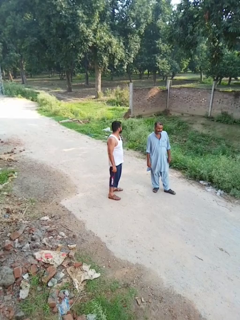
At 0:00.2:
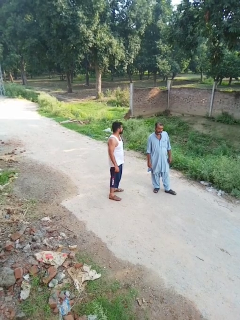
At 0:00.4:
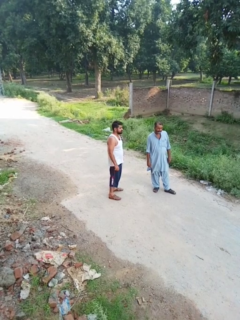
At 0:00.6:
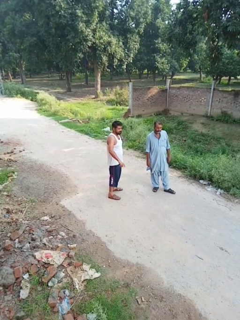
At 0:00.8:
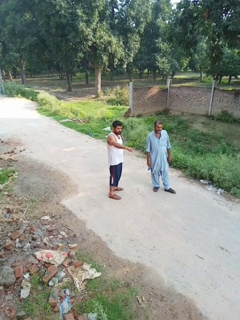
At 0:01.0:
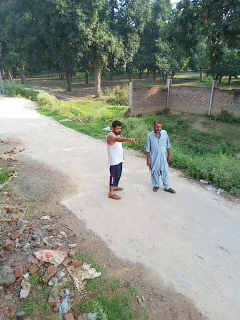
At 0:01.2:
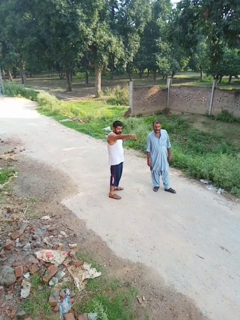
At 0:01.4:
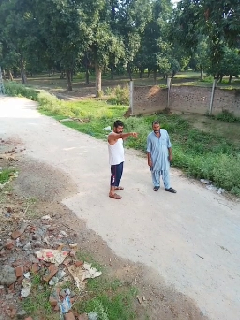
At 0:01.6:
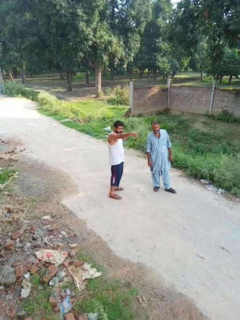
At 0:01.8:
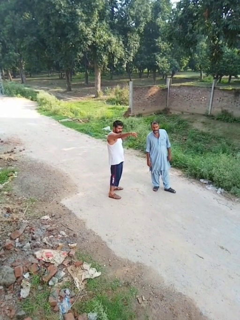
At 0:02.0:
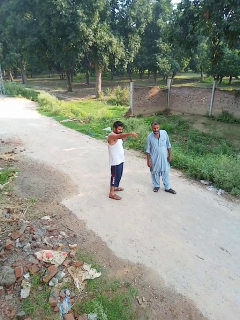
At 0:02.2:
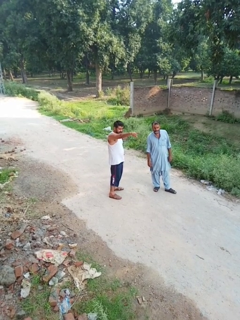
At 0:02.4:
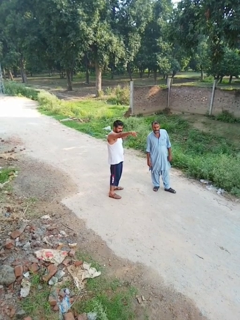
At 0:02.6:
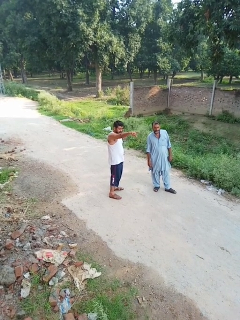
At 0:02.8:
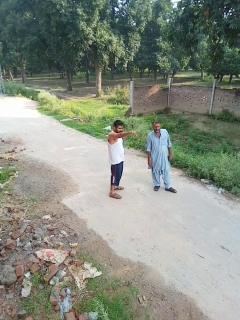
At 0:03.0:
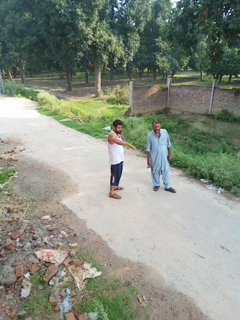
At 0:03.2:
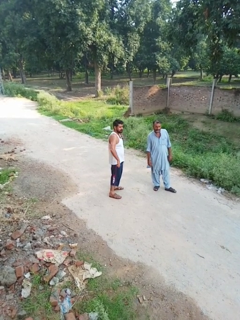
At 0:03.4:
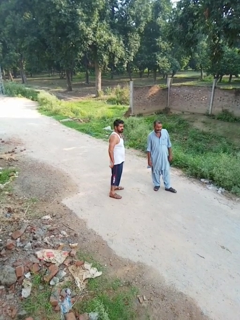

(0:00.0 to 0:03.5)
person points at person

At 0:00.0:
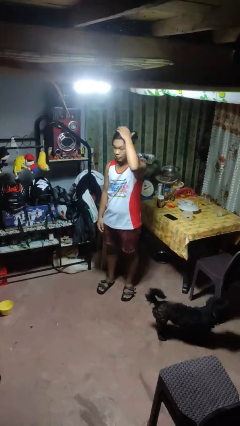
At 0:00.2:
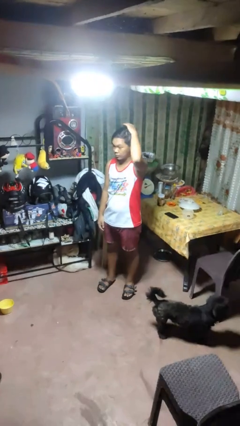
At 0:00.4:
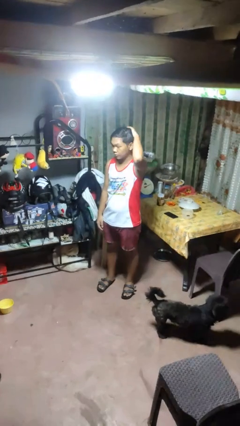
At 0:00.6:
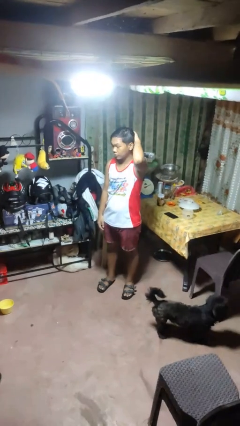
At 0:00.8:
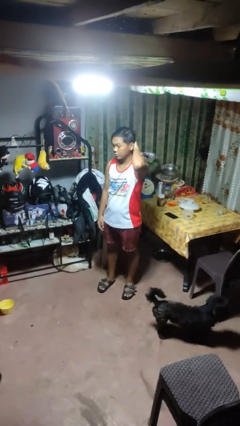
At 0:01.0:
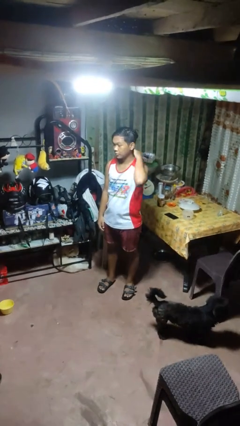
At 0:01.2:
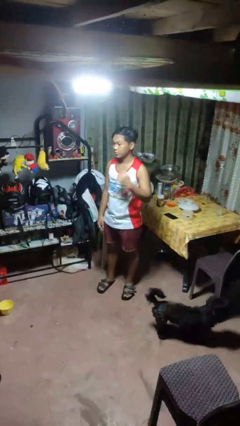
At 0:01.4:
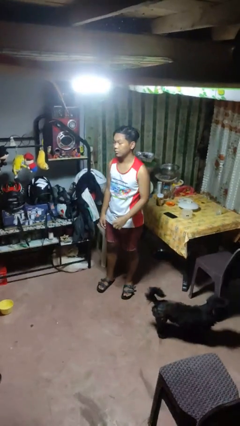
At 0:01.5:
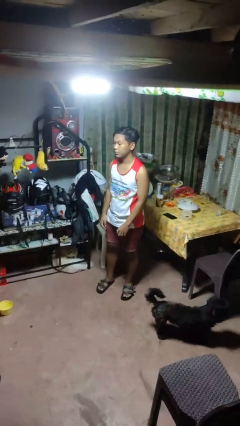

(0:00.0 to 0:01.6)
person pats head

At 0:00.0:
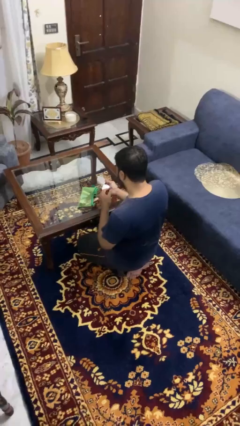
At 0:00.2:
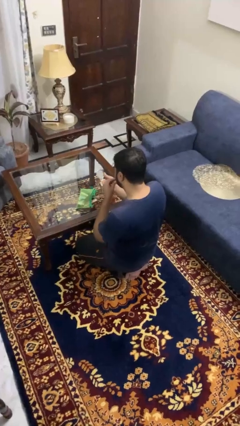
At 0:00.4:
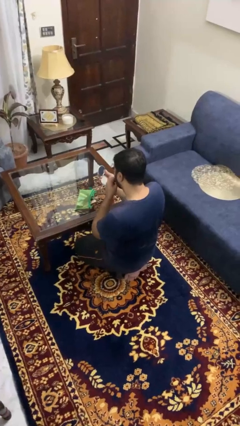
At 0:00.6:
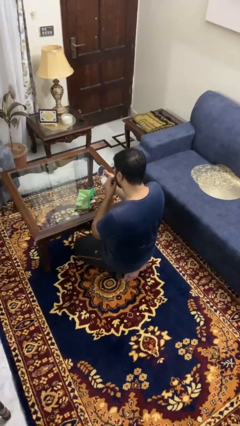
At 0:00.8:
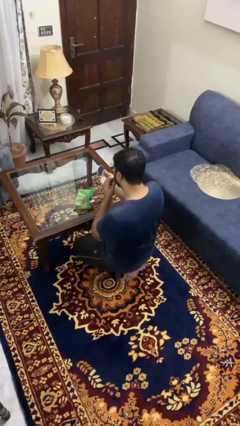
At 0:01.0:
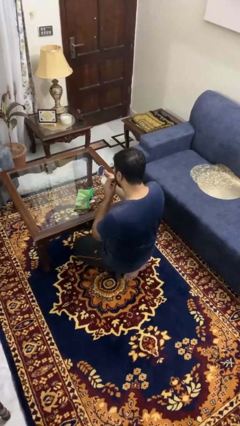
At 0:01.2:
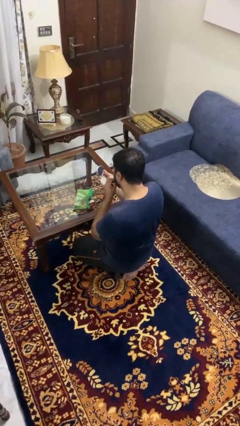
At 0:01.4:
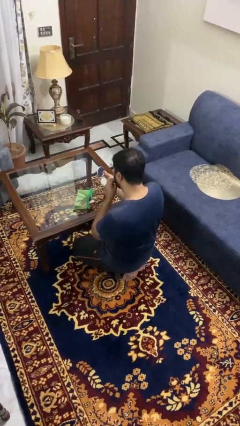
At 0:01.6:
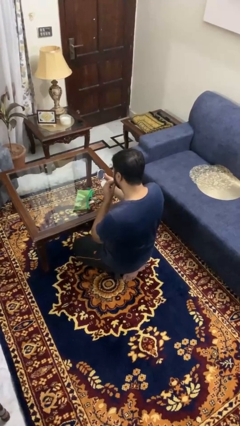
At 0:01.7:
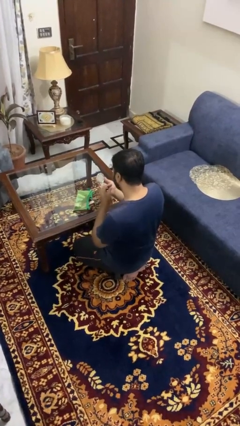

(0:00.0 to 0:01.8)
person applies lip makeup

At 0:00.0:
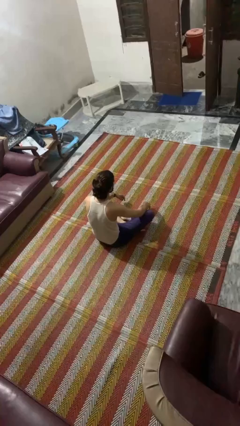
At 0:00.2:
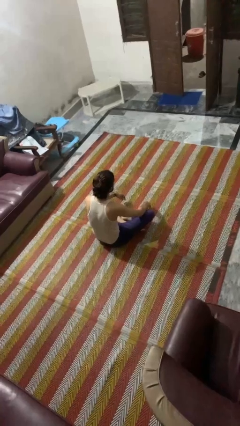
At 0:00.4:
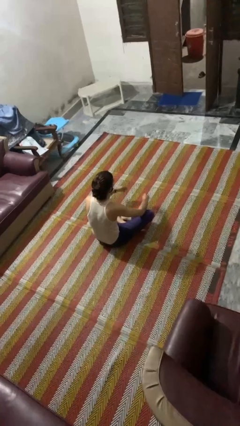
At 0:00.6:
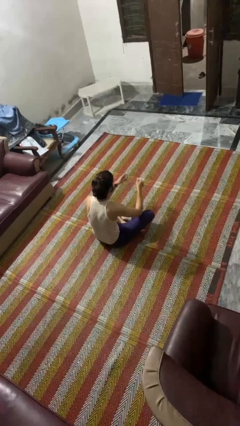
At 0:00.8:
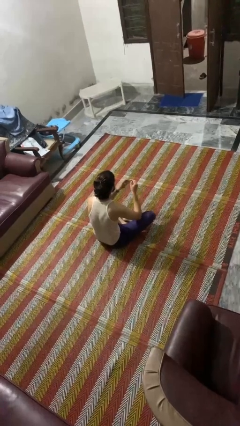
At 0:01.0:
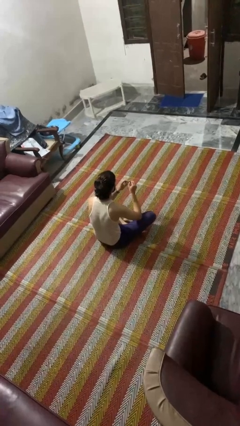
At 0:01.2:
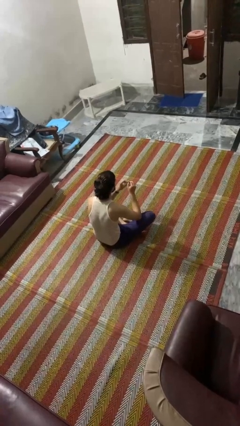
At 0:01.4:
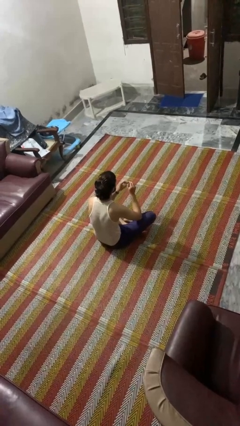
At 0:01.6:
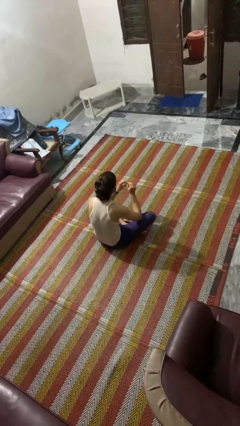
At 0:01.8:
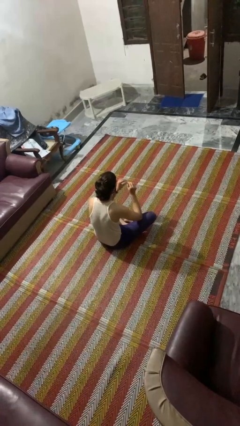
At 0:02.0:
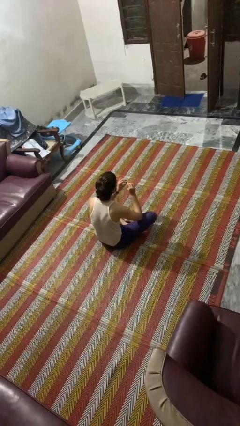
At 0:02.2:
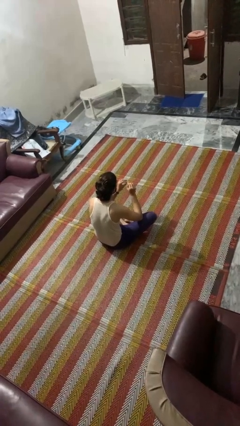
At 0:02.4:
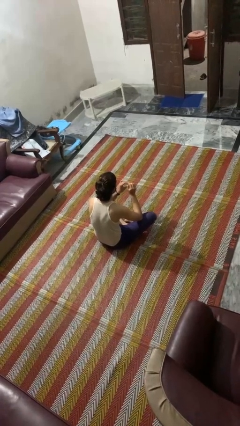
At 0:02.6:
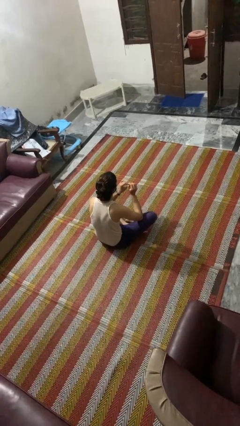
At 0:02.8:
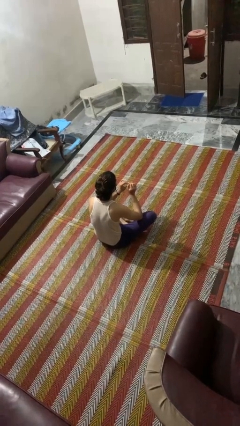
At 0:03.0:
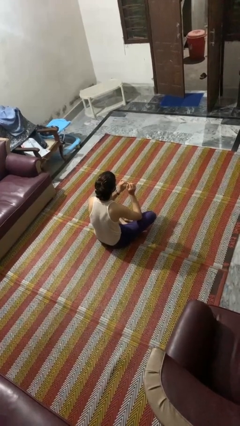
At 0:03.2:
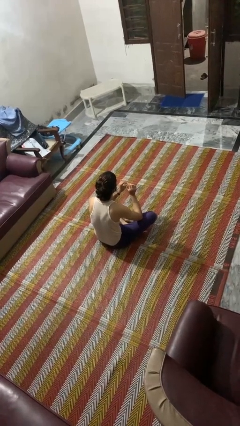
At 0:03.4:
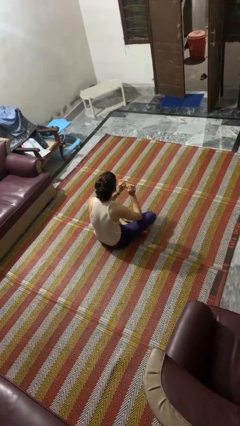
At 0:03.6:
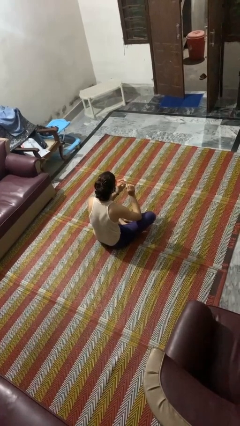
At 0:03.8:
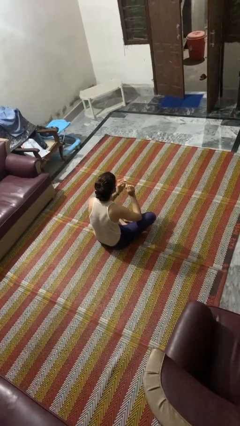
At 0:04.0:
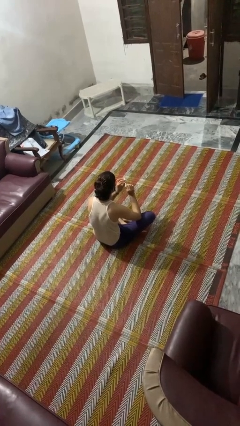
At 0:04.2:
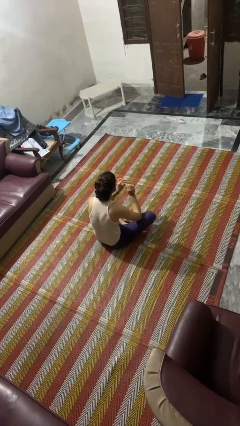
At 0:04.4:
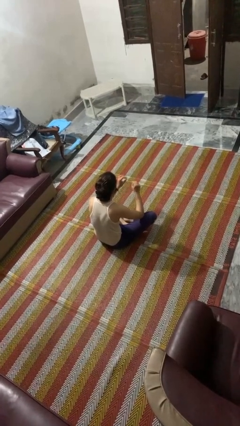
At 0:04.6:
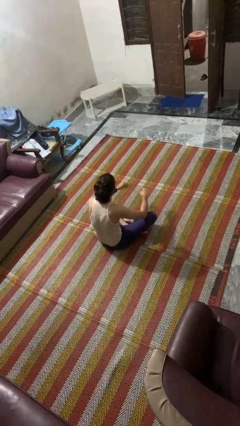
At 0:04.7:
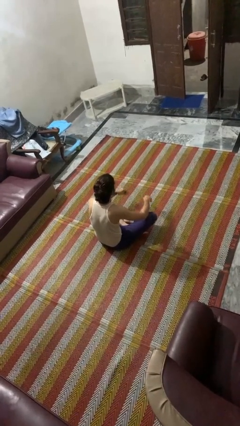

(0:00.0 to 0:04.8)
person files fingernails

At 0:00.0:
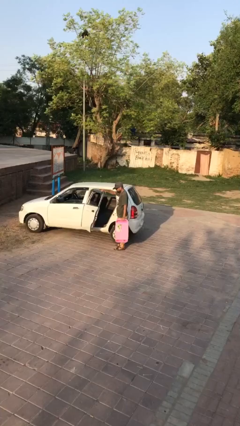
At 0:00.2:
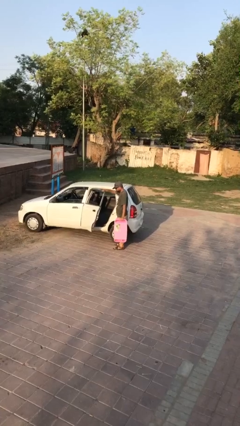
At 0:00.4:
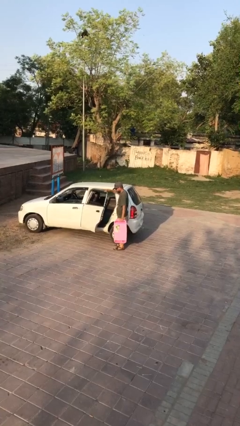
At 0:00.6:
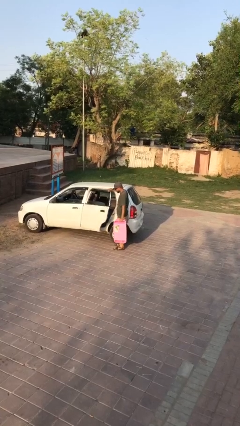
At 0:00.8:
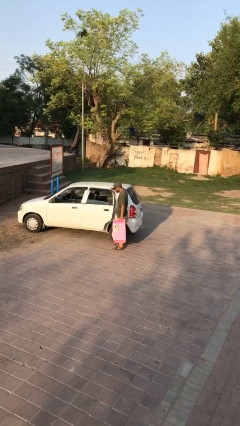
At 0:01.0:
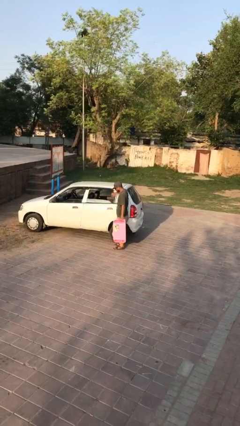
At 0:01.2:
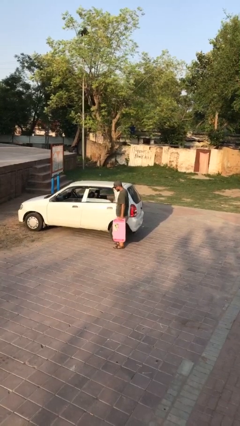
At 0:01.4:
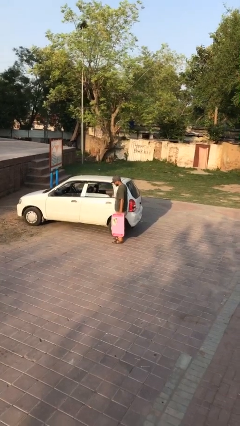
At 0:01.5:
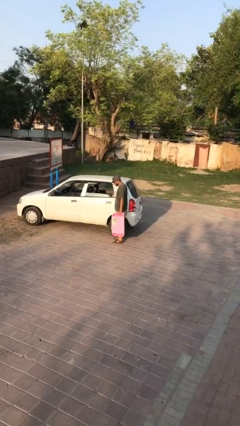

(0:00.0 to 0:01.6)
person closes car door

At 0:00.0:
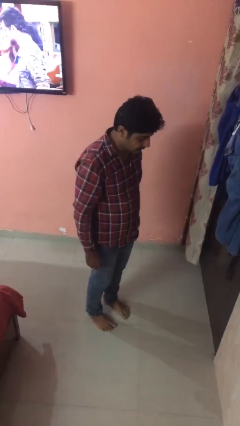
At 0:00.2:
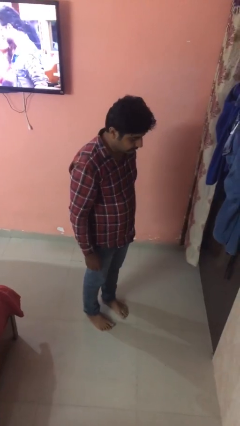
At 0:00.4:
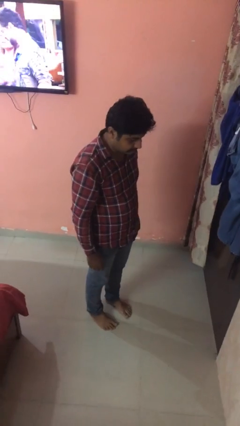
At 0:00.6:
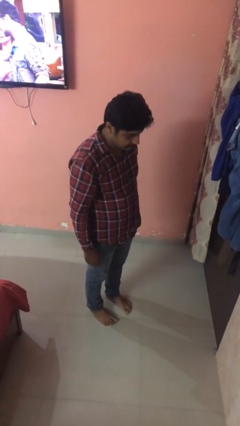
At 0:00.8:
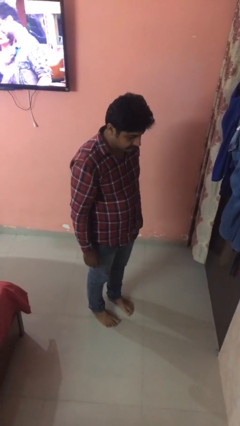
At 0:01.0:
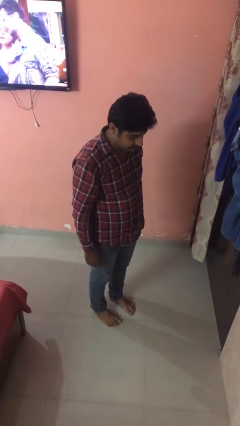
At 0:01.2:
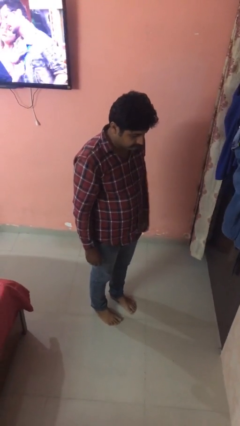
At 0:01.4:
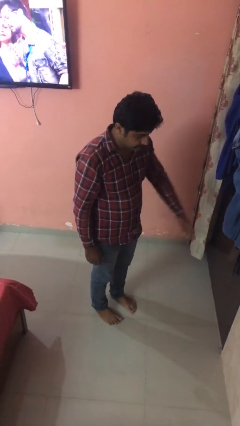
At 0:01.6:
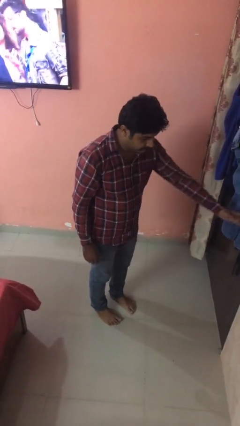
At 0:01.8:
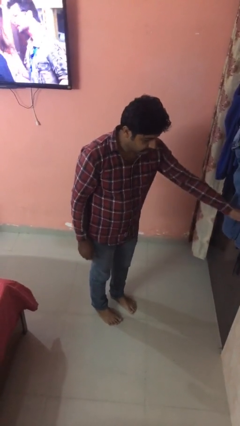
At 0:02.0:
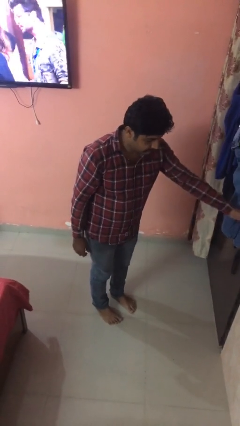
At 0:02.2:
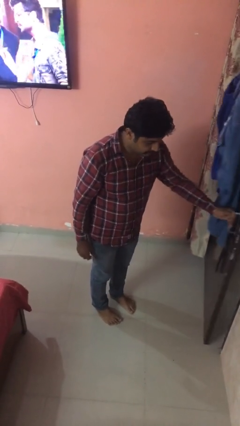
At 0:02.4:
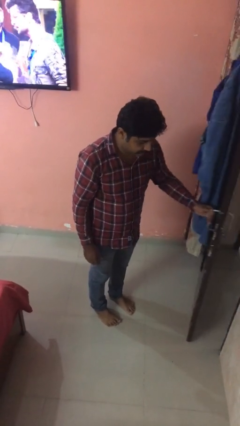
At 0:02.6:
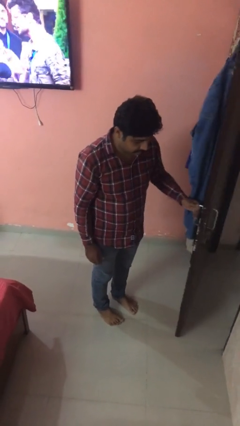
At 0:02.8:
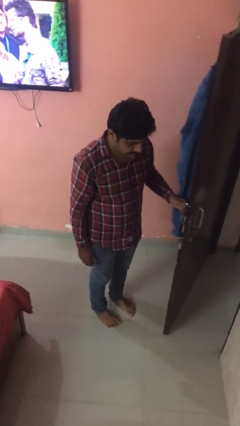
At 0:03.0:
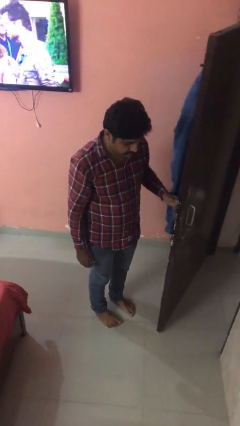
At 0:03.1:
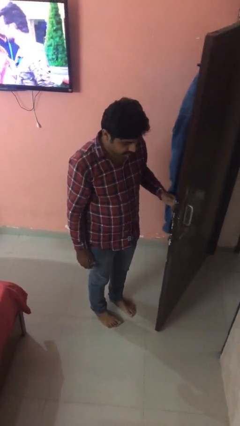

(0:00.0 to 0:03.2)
person opens facility door

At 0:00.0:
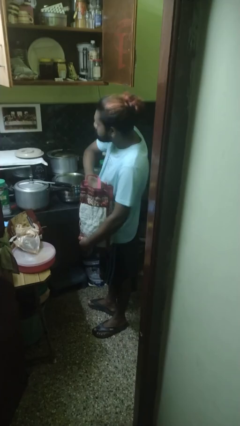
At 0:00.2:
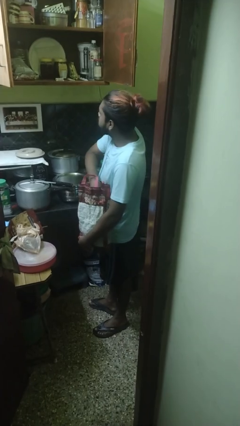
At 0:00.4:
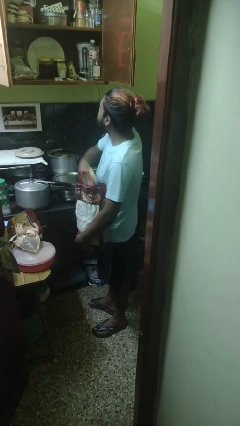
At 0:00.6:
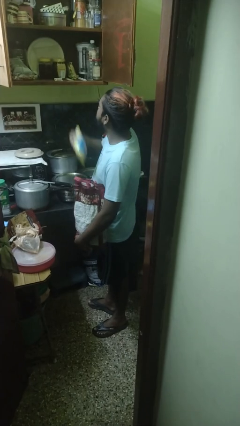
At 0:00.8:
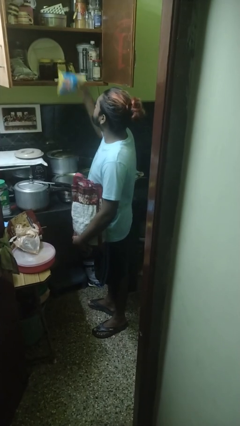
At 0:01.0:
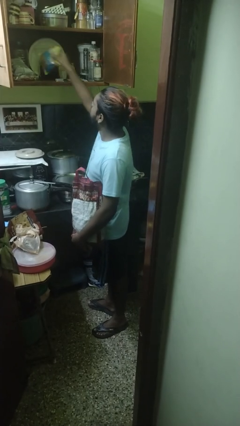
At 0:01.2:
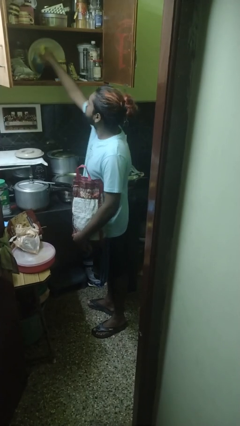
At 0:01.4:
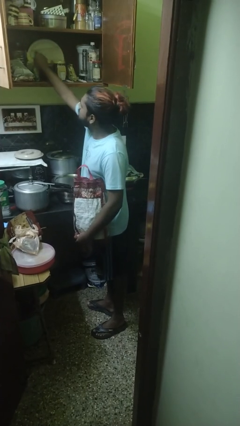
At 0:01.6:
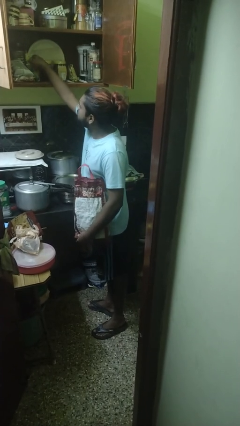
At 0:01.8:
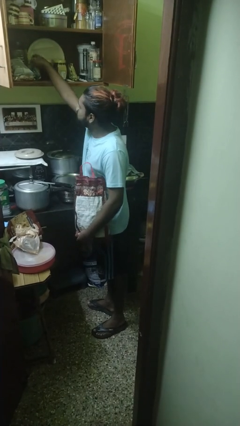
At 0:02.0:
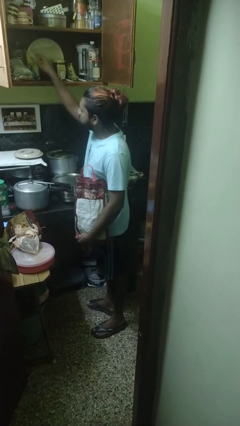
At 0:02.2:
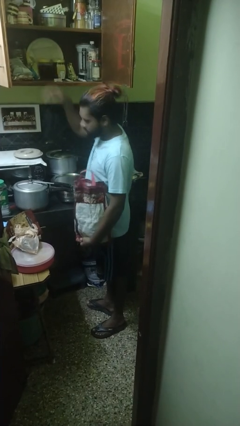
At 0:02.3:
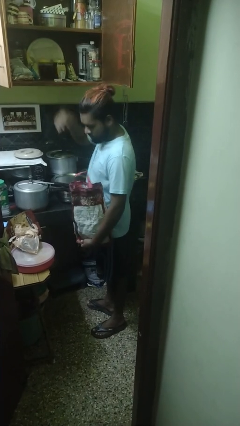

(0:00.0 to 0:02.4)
person loads groceries into cabinet
